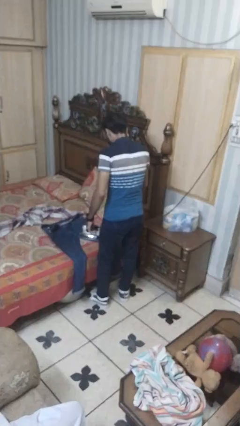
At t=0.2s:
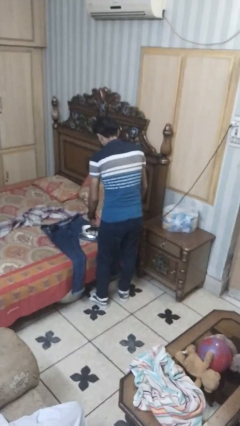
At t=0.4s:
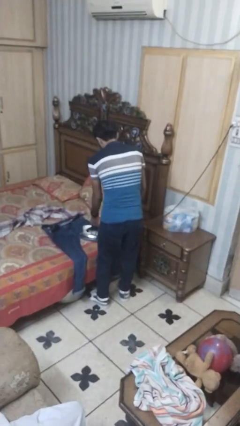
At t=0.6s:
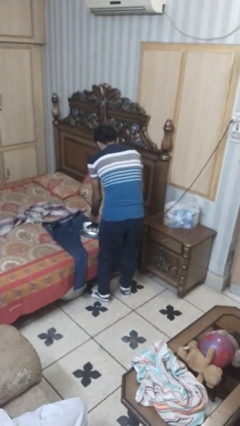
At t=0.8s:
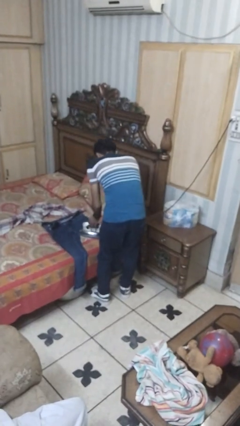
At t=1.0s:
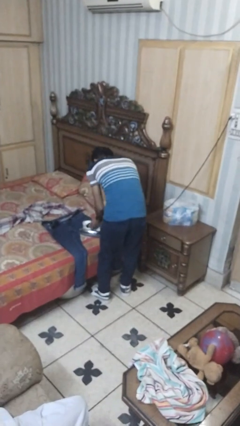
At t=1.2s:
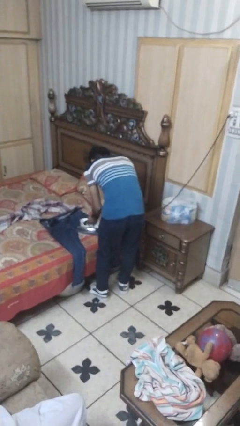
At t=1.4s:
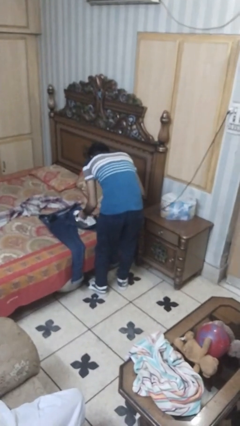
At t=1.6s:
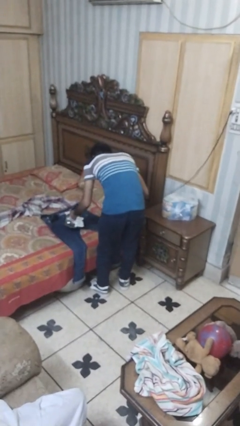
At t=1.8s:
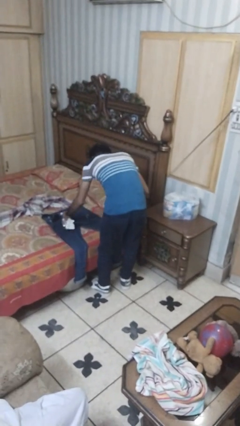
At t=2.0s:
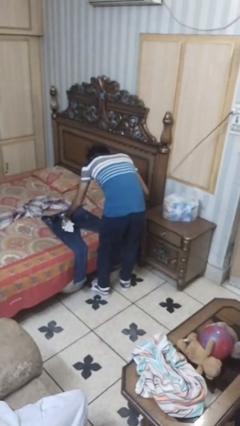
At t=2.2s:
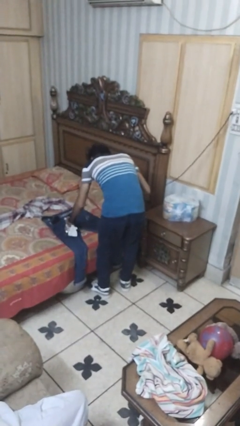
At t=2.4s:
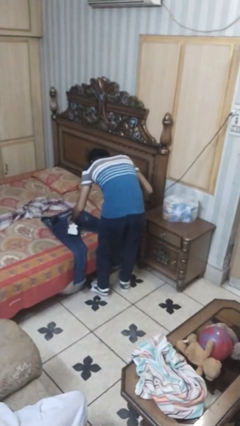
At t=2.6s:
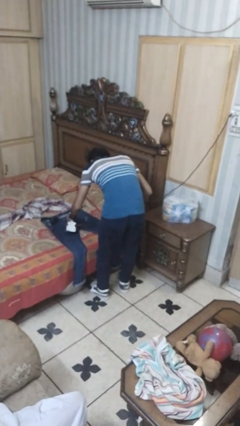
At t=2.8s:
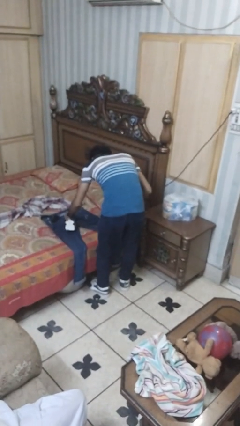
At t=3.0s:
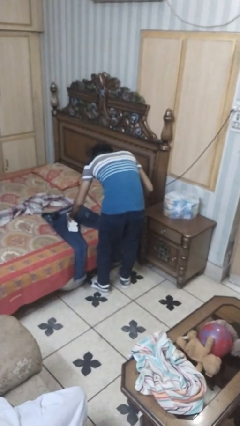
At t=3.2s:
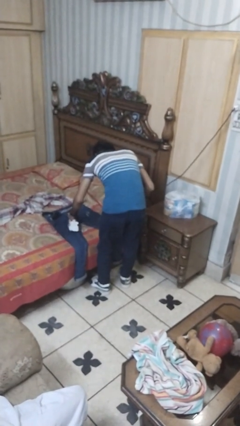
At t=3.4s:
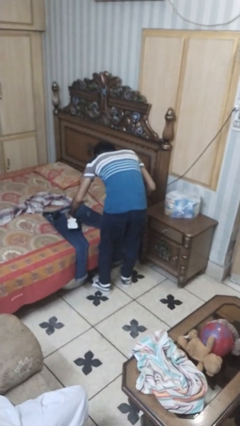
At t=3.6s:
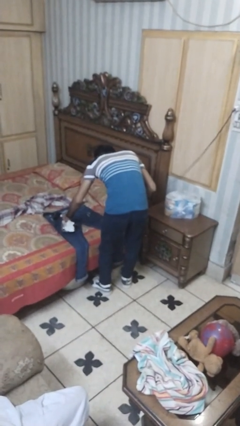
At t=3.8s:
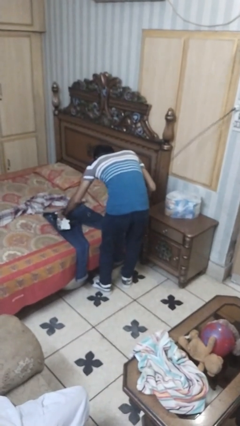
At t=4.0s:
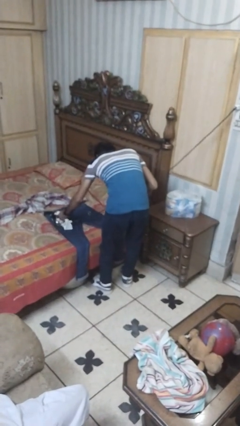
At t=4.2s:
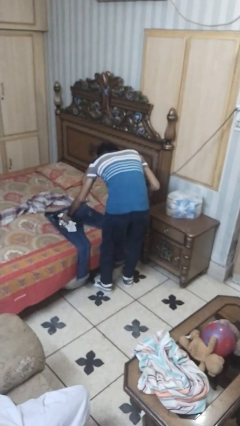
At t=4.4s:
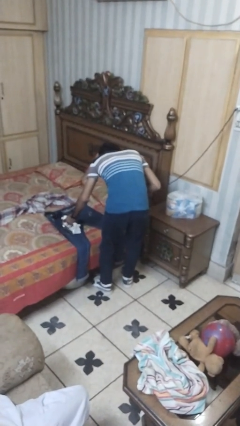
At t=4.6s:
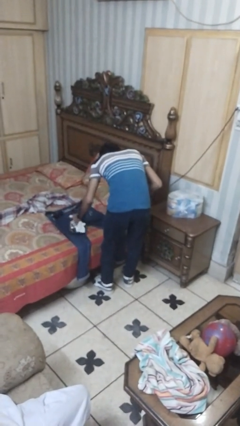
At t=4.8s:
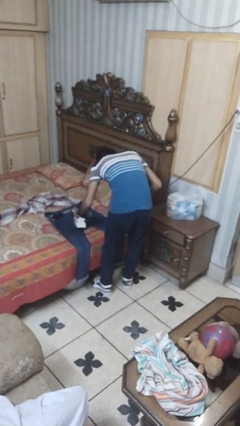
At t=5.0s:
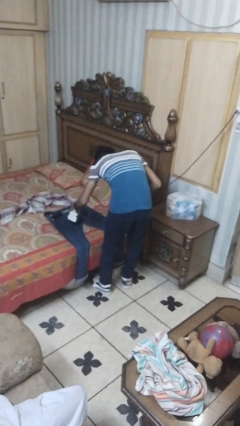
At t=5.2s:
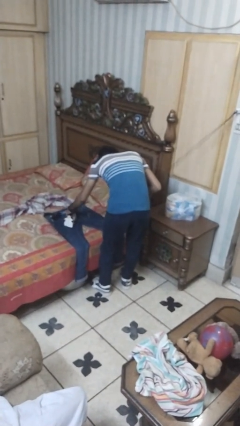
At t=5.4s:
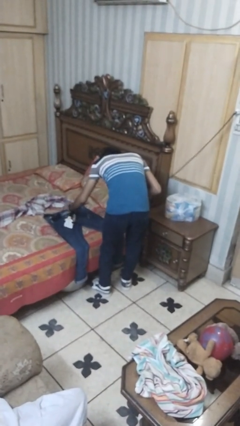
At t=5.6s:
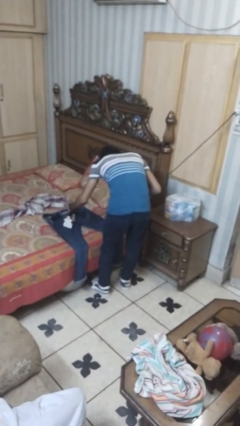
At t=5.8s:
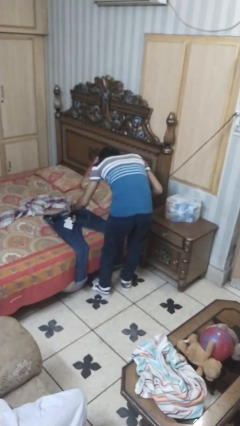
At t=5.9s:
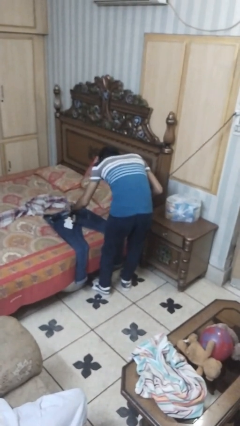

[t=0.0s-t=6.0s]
person irons clothes

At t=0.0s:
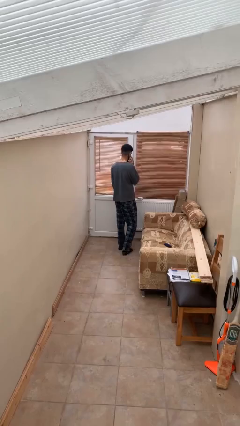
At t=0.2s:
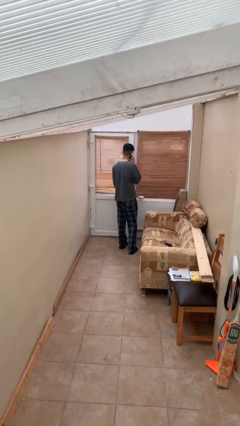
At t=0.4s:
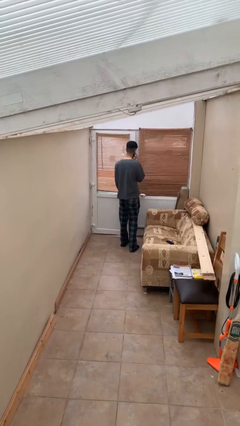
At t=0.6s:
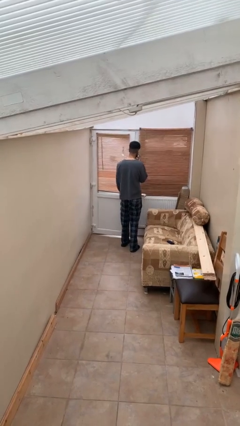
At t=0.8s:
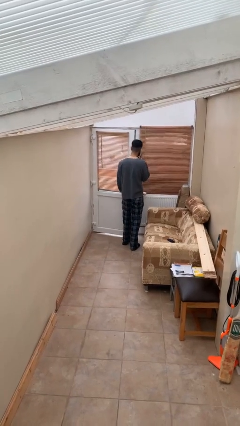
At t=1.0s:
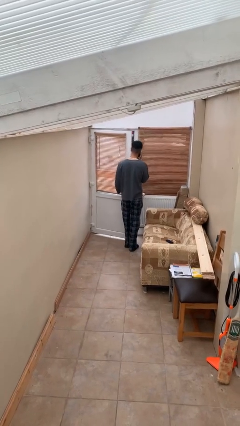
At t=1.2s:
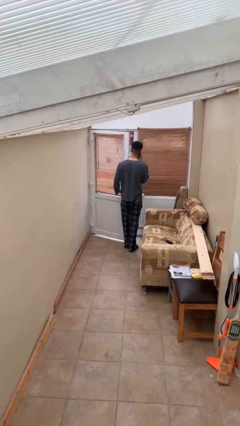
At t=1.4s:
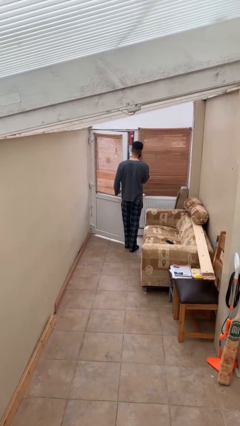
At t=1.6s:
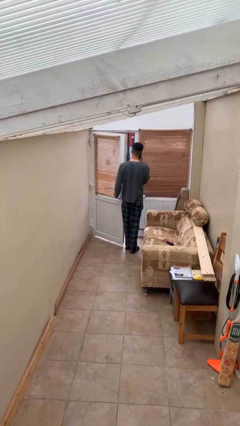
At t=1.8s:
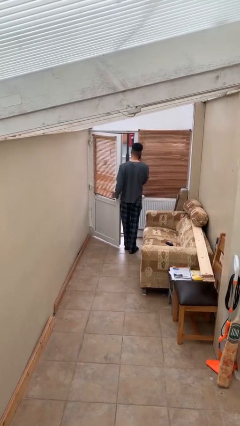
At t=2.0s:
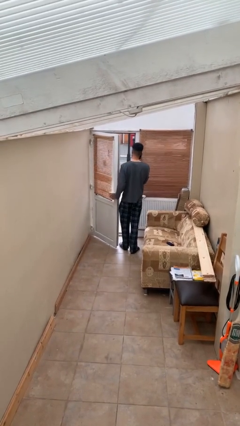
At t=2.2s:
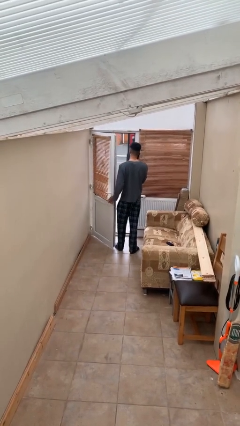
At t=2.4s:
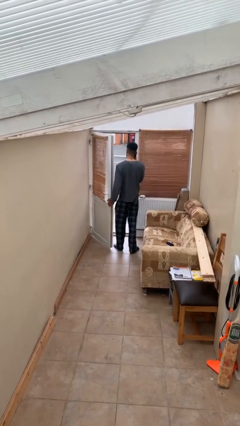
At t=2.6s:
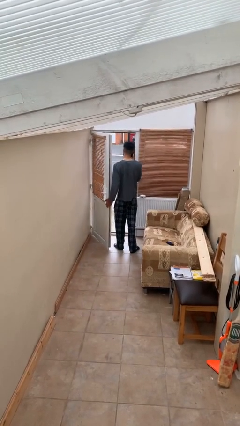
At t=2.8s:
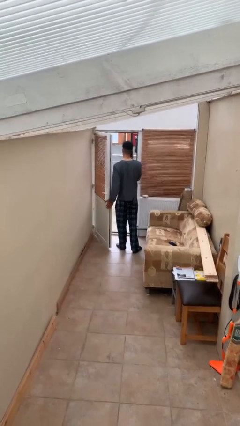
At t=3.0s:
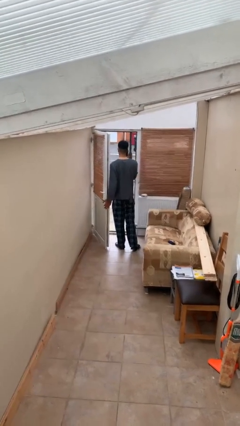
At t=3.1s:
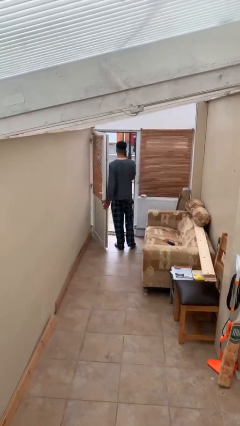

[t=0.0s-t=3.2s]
person opens facility door

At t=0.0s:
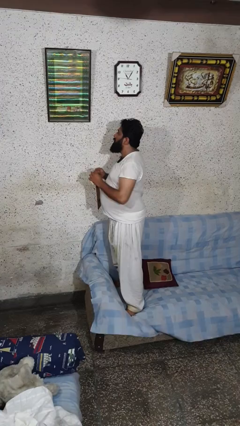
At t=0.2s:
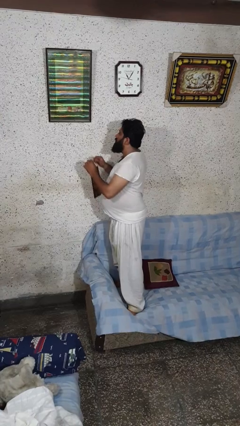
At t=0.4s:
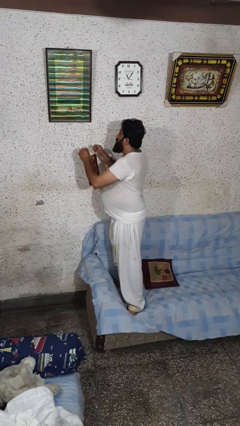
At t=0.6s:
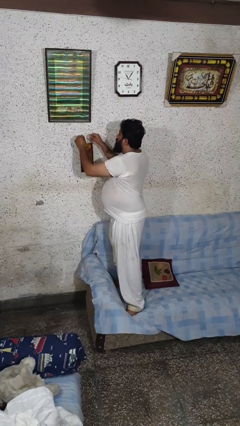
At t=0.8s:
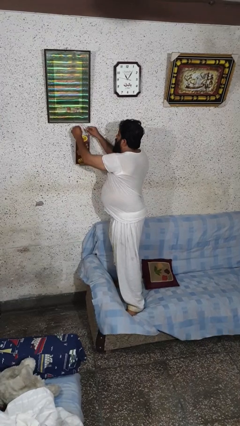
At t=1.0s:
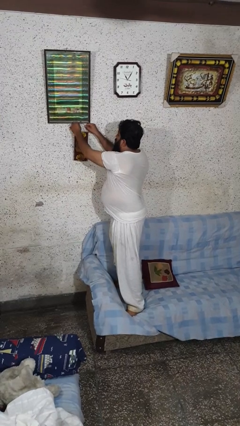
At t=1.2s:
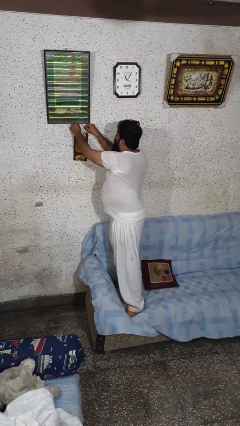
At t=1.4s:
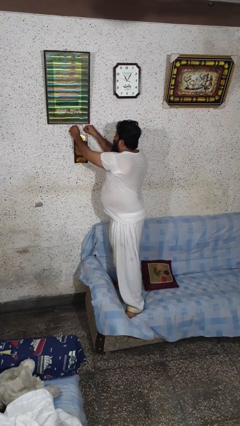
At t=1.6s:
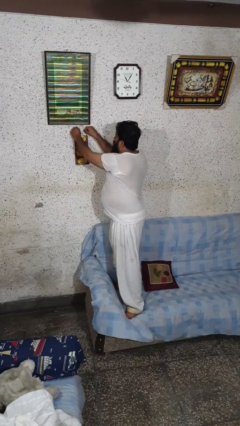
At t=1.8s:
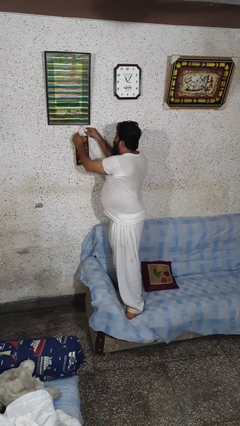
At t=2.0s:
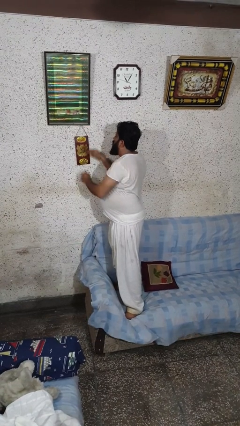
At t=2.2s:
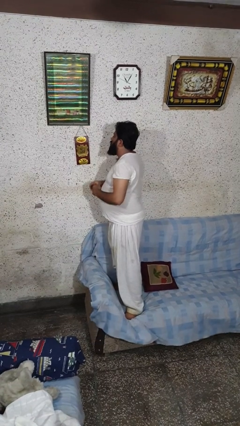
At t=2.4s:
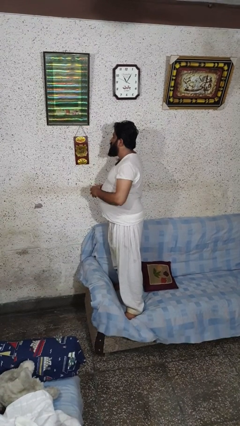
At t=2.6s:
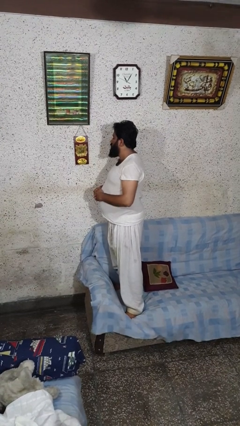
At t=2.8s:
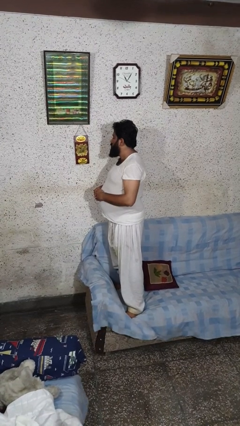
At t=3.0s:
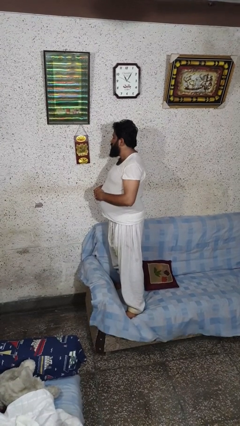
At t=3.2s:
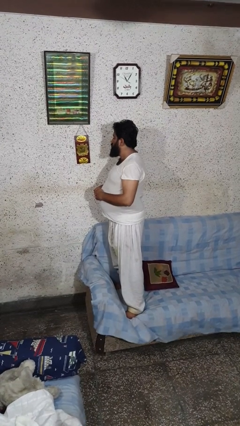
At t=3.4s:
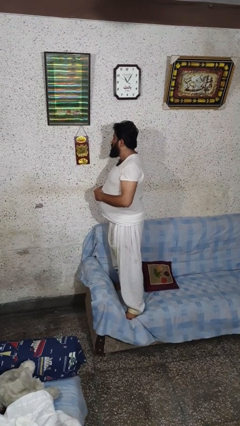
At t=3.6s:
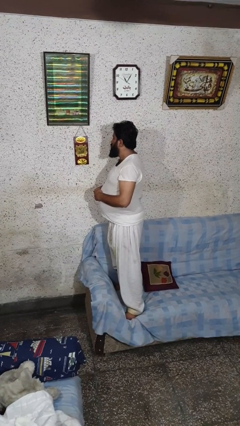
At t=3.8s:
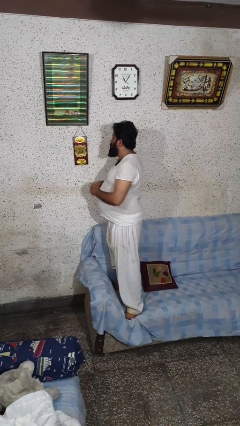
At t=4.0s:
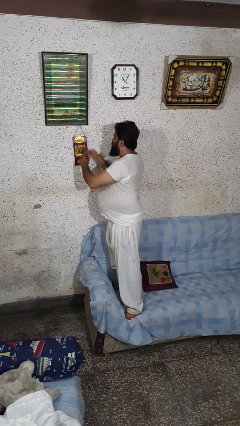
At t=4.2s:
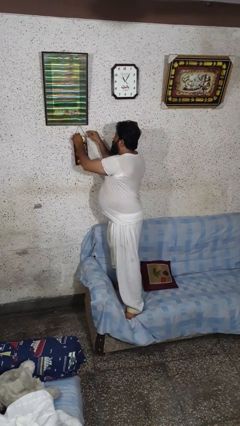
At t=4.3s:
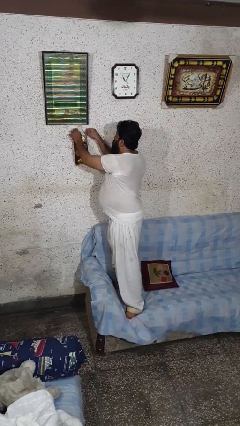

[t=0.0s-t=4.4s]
person puts up picture frame

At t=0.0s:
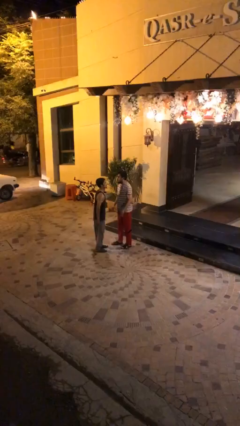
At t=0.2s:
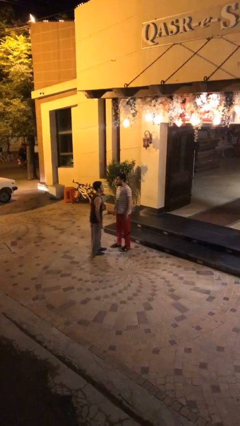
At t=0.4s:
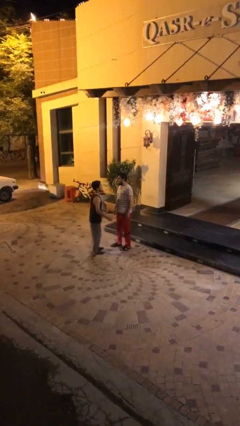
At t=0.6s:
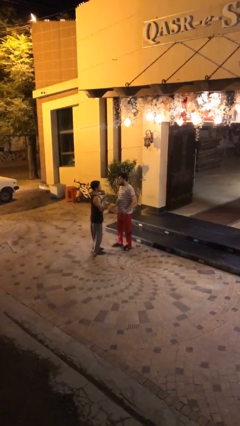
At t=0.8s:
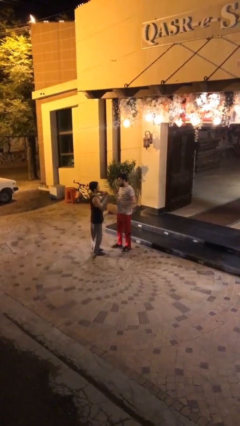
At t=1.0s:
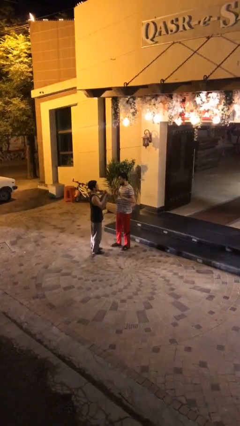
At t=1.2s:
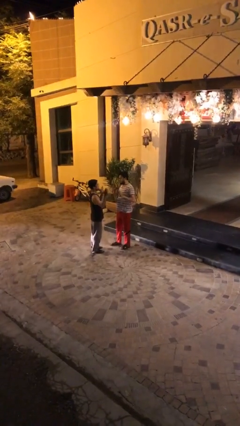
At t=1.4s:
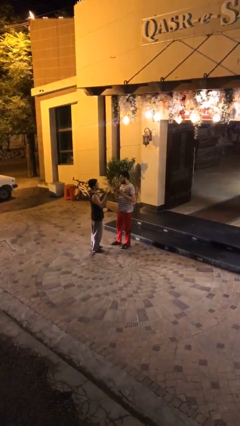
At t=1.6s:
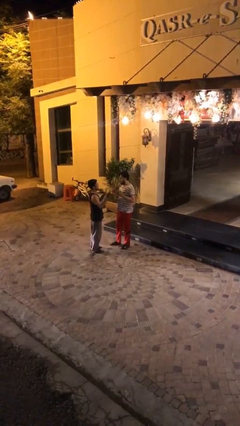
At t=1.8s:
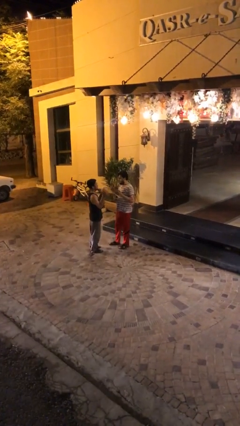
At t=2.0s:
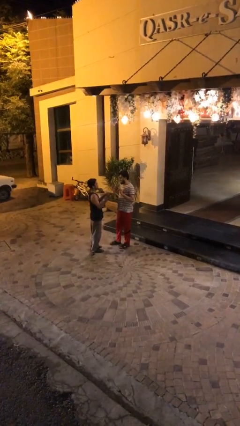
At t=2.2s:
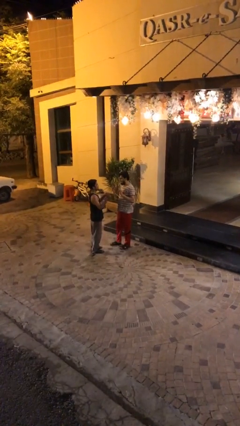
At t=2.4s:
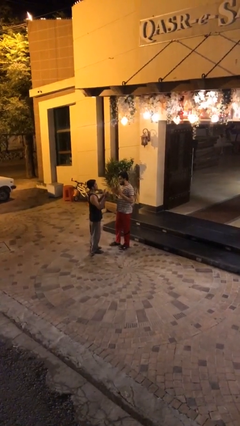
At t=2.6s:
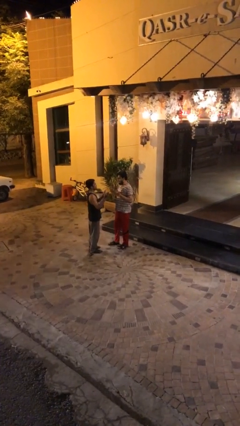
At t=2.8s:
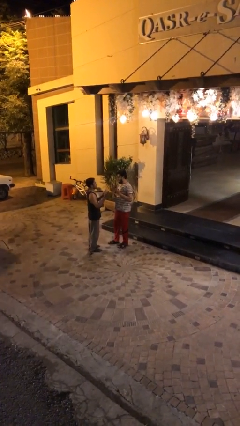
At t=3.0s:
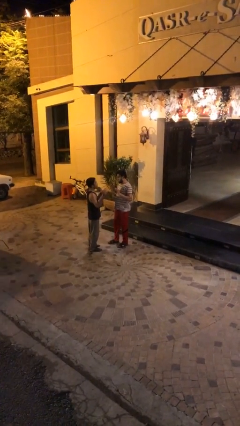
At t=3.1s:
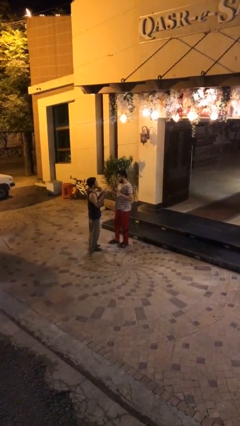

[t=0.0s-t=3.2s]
person talks to person

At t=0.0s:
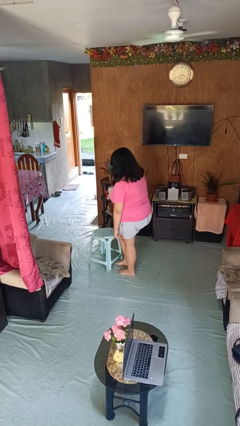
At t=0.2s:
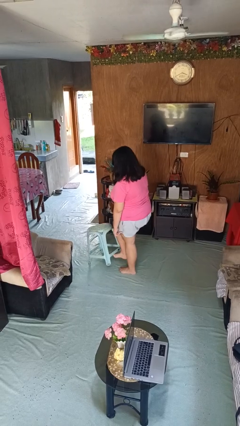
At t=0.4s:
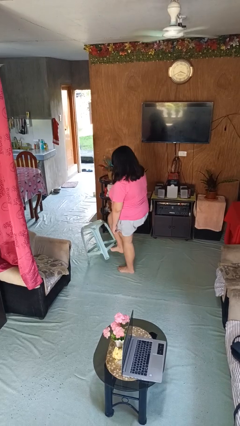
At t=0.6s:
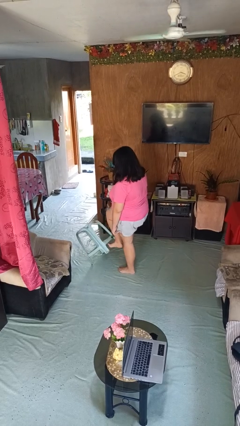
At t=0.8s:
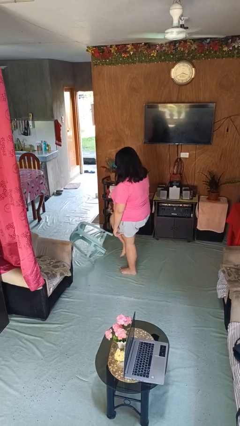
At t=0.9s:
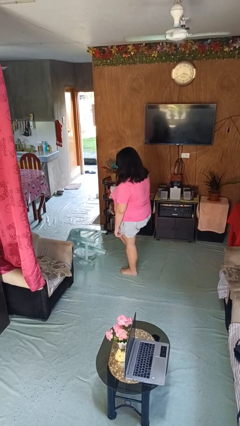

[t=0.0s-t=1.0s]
person knocks over furniture
